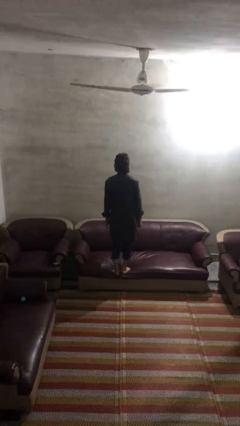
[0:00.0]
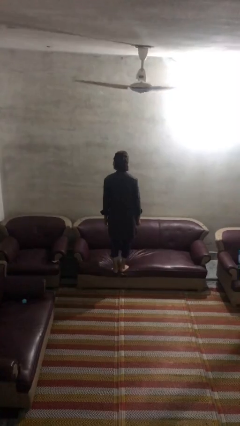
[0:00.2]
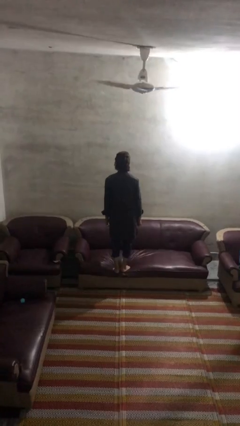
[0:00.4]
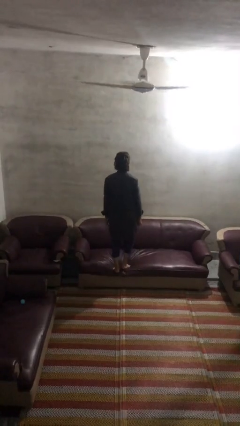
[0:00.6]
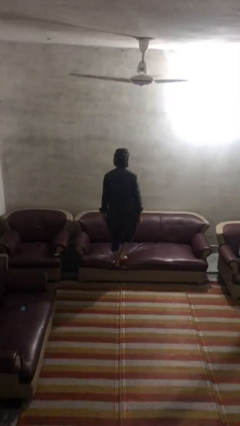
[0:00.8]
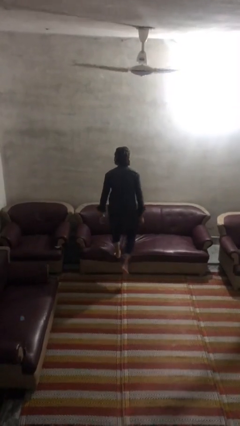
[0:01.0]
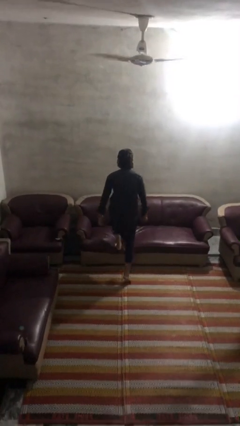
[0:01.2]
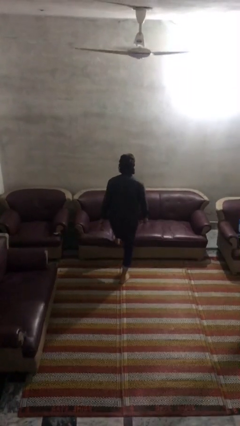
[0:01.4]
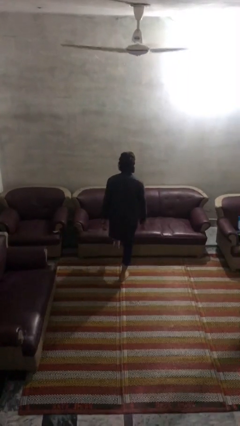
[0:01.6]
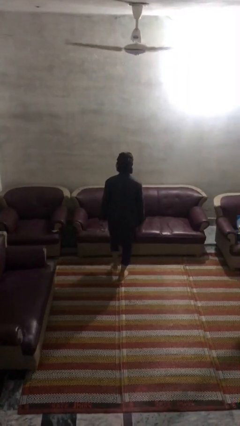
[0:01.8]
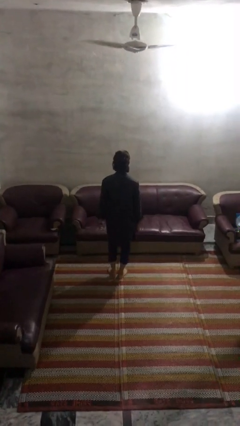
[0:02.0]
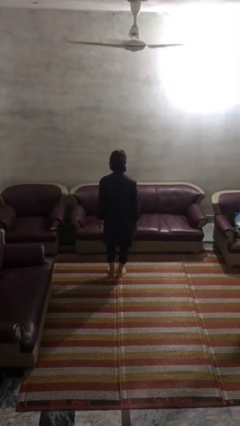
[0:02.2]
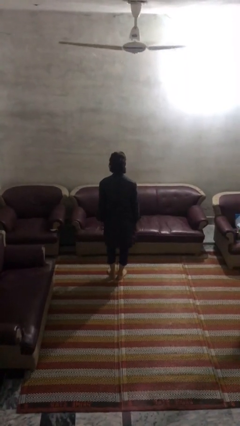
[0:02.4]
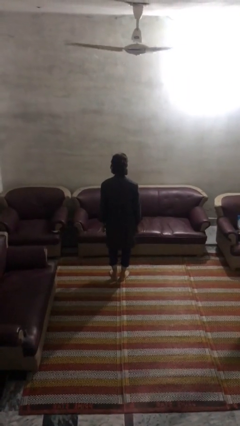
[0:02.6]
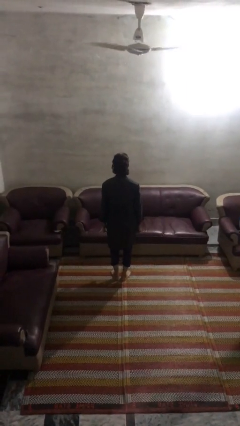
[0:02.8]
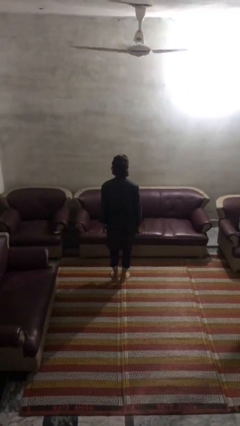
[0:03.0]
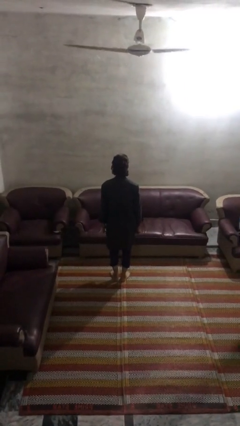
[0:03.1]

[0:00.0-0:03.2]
person climbs off couch

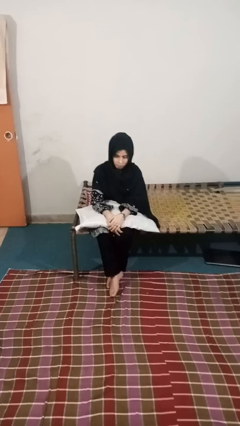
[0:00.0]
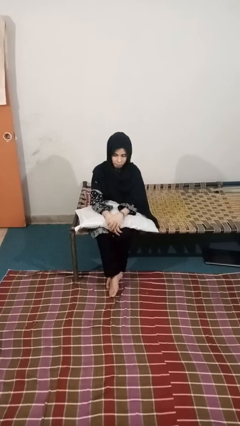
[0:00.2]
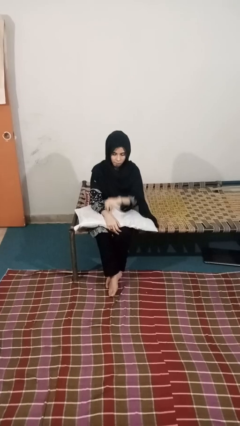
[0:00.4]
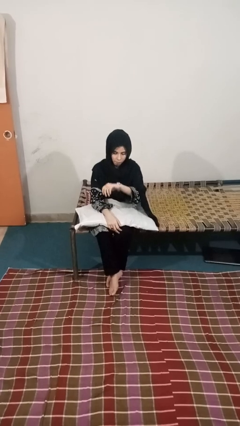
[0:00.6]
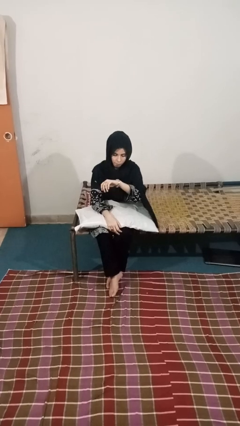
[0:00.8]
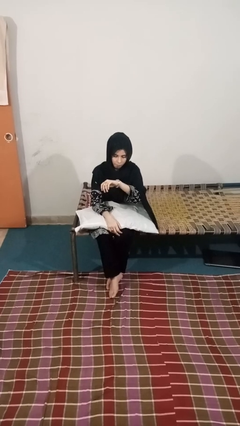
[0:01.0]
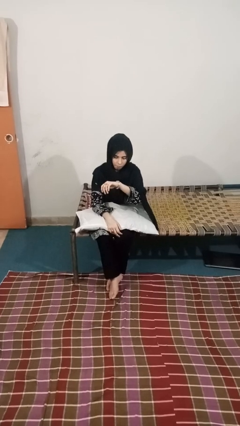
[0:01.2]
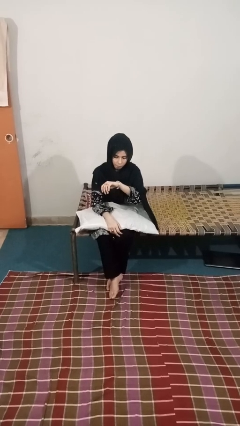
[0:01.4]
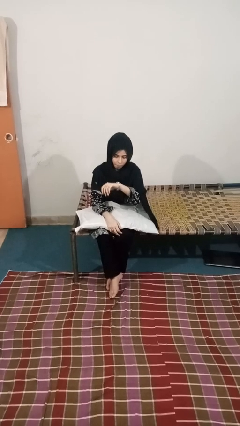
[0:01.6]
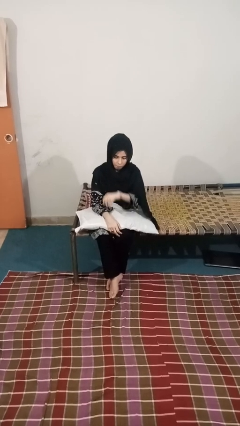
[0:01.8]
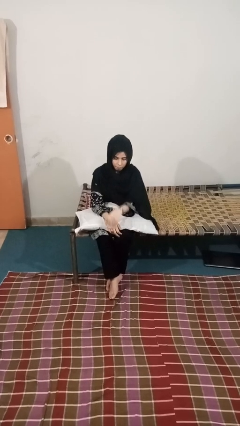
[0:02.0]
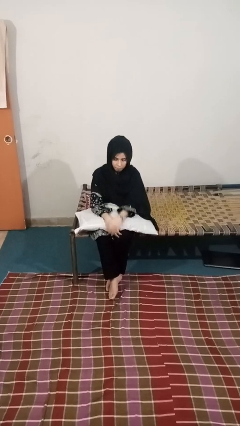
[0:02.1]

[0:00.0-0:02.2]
person looks at wristwatch

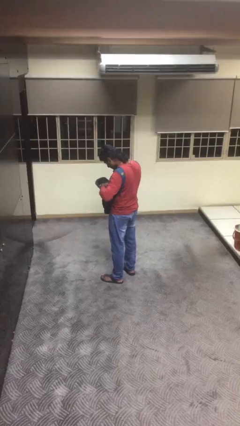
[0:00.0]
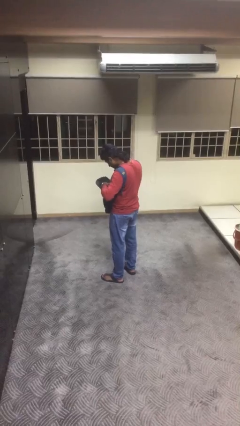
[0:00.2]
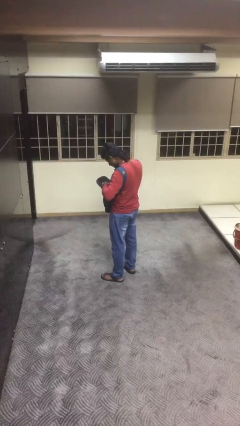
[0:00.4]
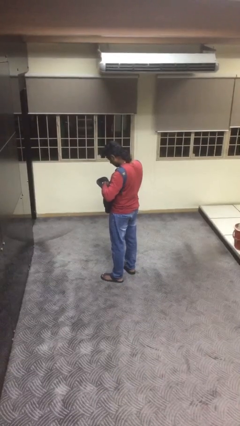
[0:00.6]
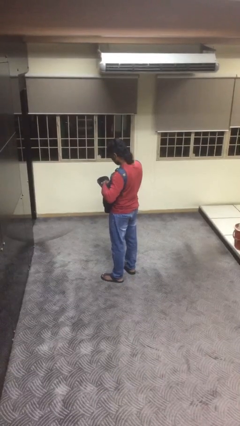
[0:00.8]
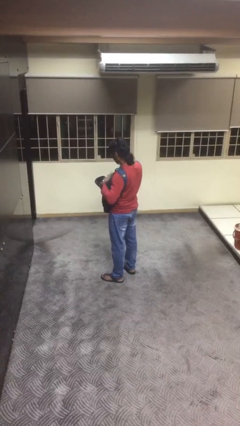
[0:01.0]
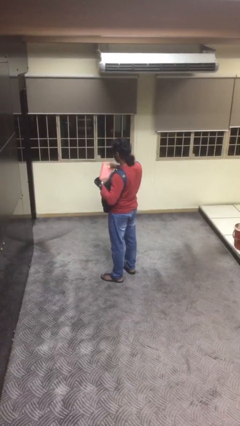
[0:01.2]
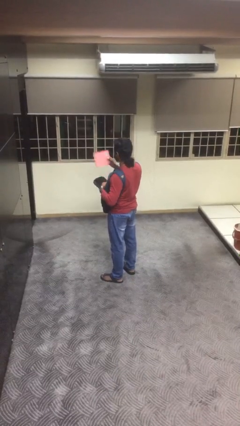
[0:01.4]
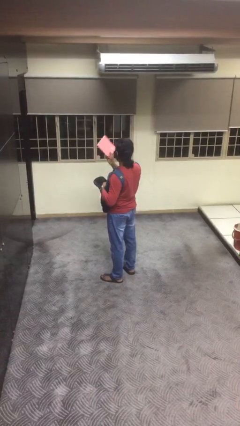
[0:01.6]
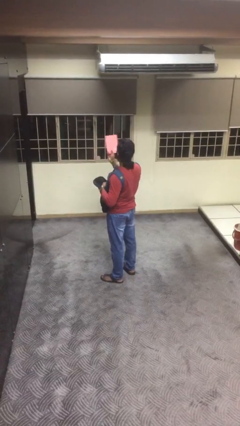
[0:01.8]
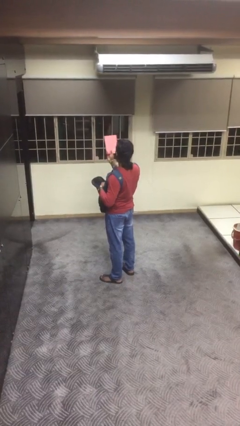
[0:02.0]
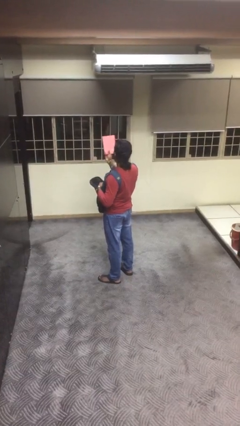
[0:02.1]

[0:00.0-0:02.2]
person takes object from backpack

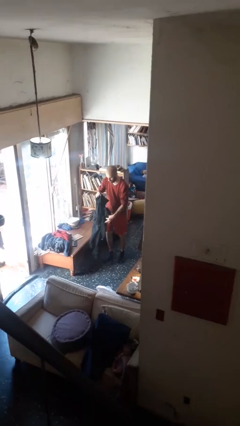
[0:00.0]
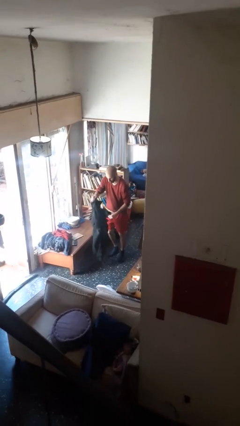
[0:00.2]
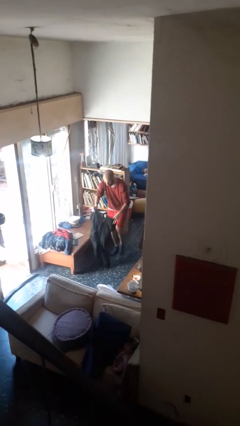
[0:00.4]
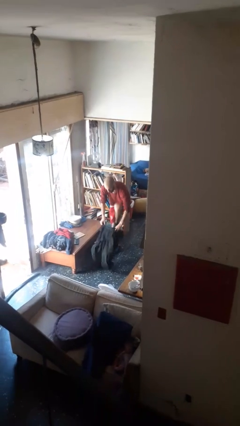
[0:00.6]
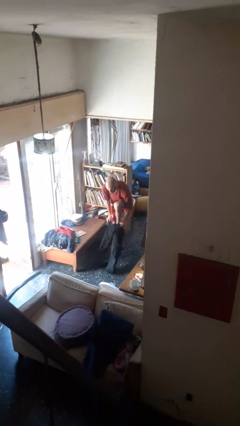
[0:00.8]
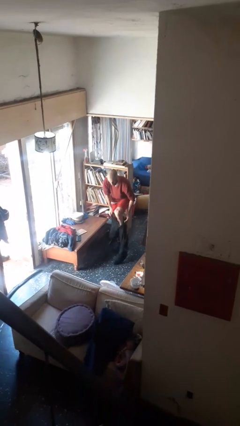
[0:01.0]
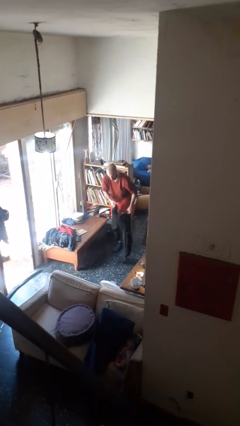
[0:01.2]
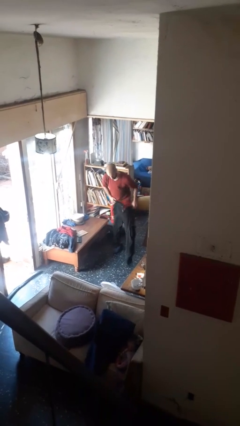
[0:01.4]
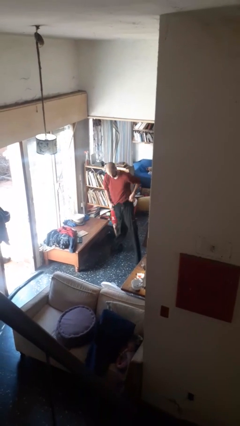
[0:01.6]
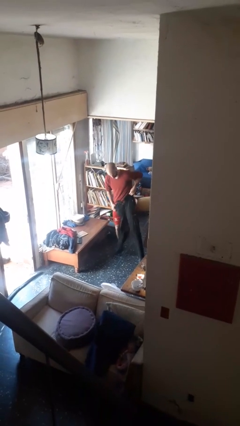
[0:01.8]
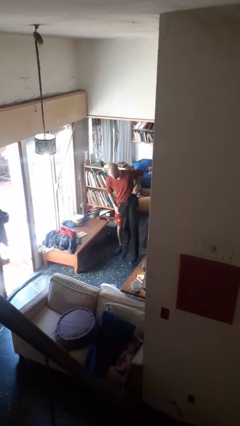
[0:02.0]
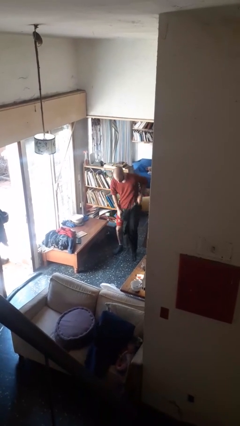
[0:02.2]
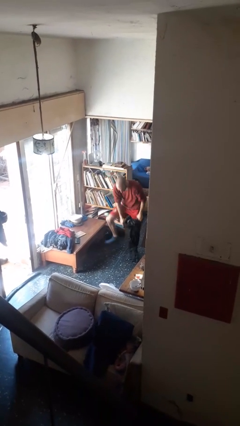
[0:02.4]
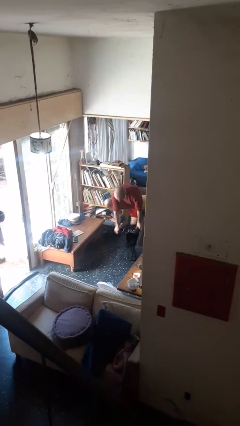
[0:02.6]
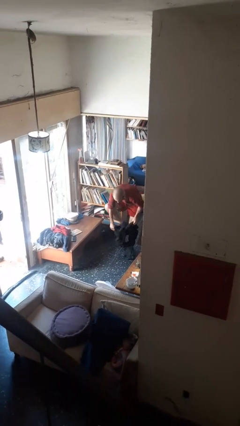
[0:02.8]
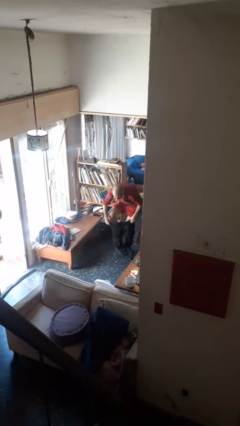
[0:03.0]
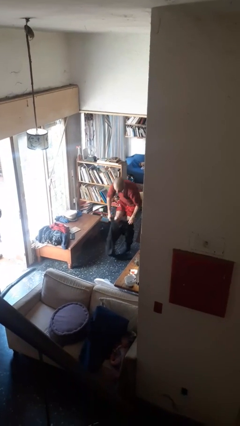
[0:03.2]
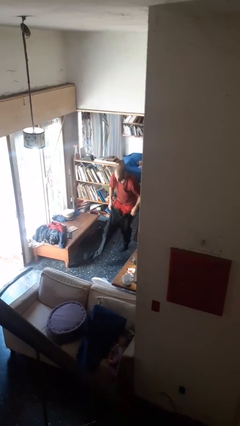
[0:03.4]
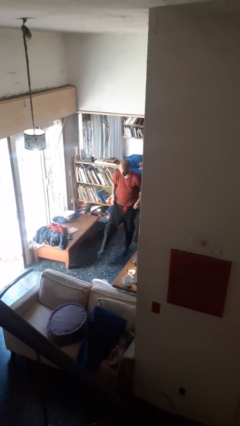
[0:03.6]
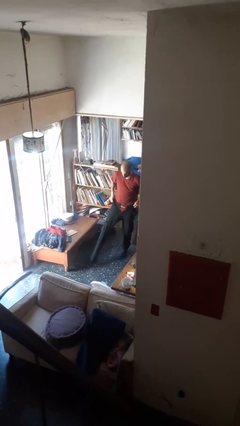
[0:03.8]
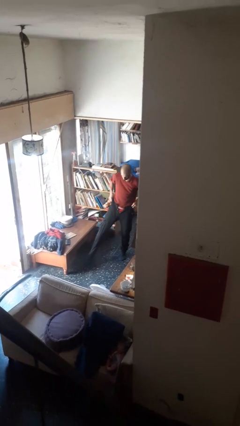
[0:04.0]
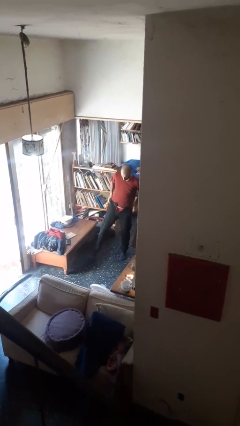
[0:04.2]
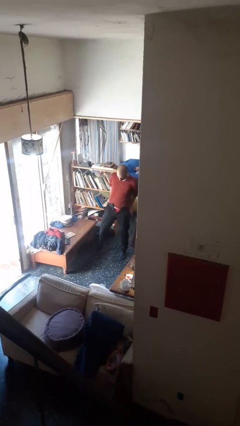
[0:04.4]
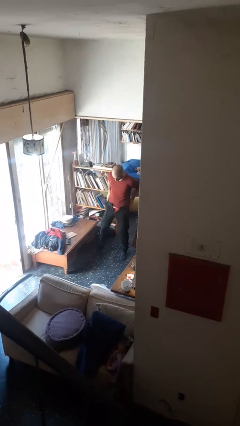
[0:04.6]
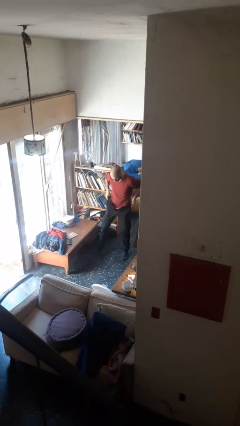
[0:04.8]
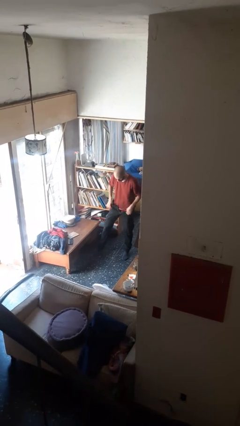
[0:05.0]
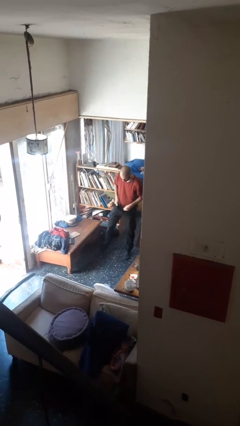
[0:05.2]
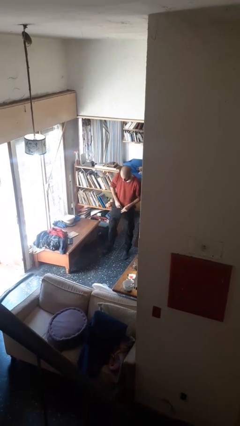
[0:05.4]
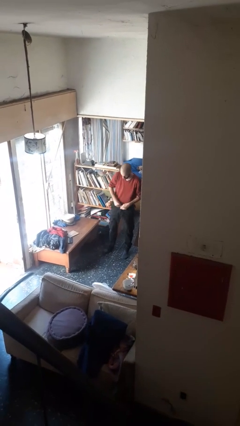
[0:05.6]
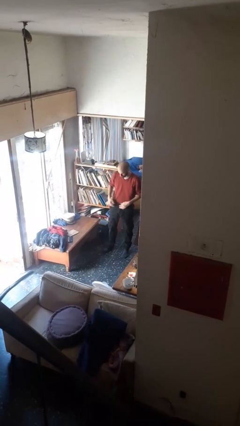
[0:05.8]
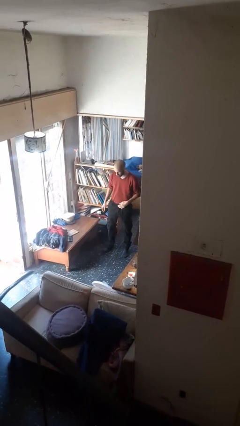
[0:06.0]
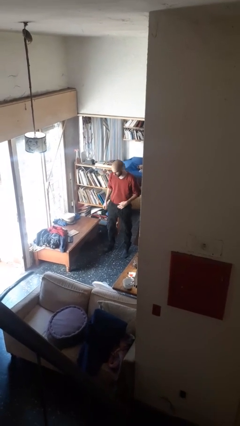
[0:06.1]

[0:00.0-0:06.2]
person puts on pants

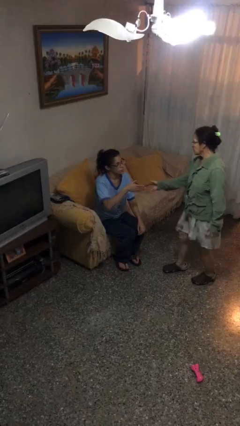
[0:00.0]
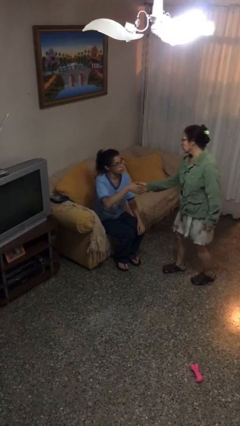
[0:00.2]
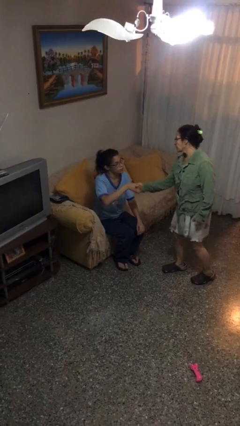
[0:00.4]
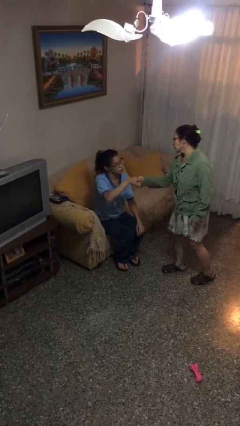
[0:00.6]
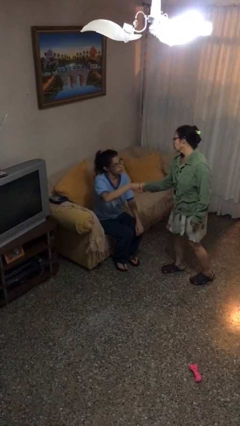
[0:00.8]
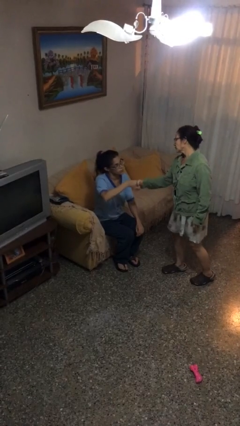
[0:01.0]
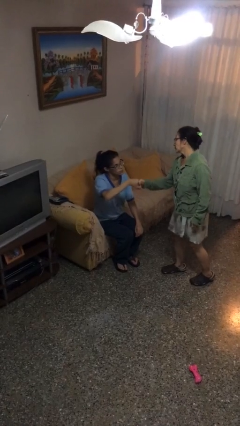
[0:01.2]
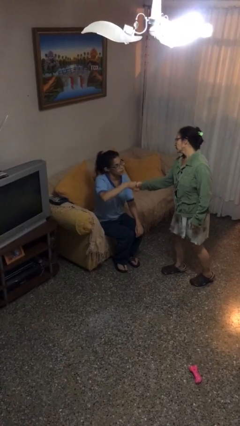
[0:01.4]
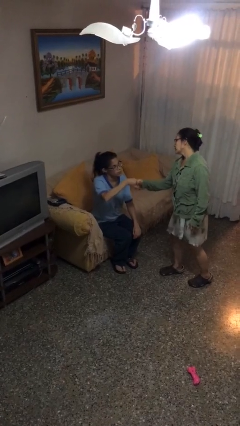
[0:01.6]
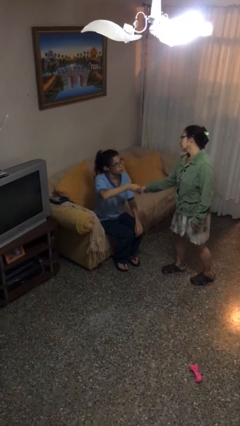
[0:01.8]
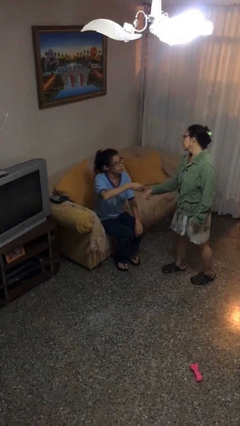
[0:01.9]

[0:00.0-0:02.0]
person shakes hand

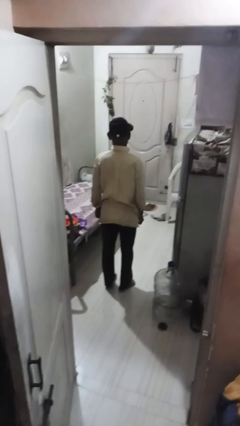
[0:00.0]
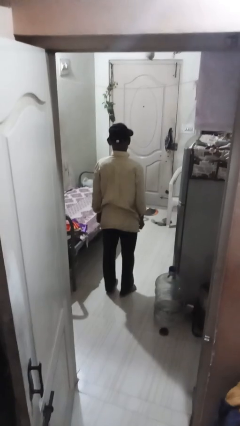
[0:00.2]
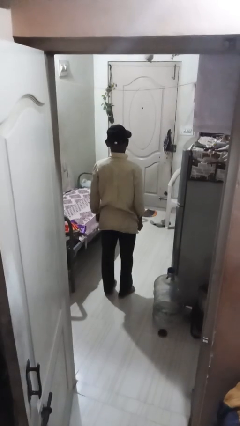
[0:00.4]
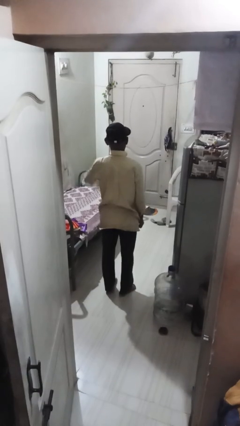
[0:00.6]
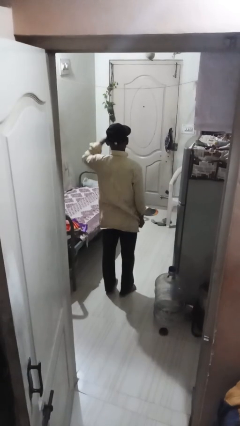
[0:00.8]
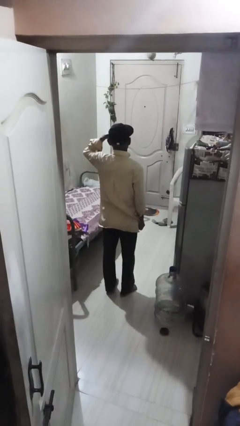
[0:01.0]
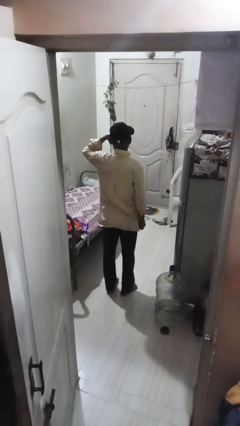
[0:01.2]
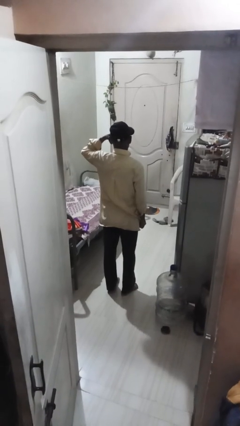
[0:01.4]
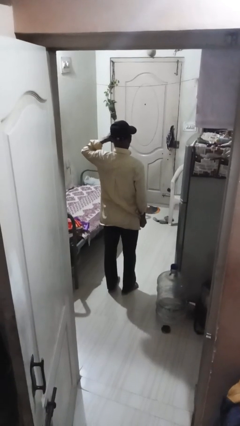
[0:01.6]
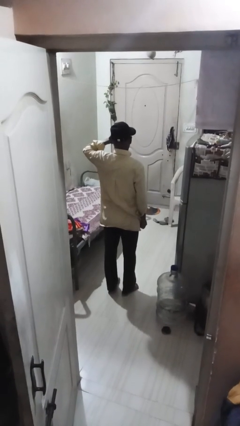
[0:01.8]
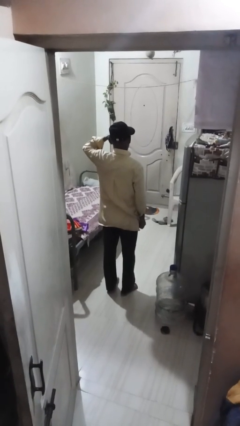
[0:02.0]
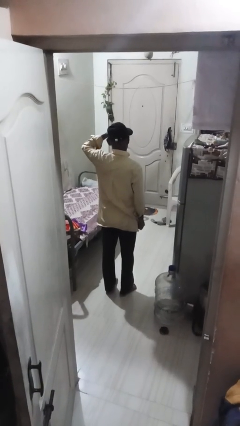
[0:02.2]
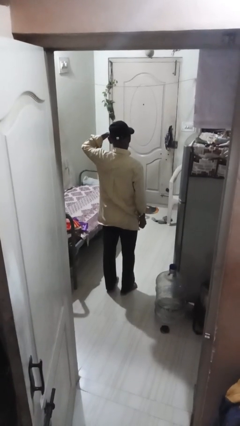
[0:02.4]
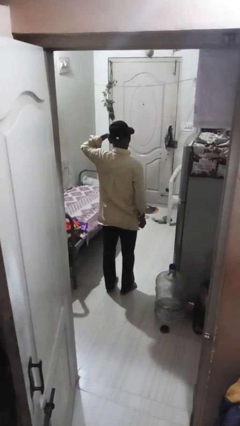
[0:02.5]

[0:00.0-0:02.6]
person rubs eyes
